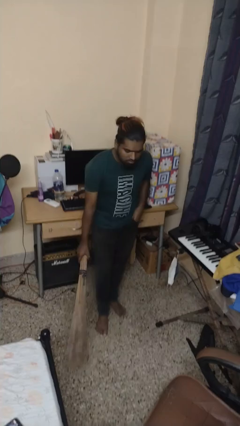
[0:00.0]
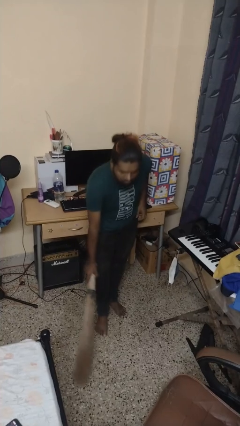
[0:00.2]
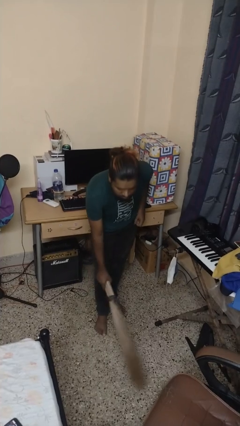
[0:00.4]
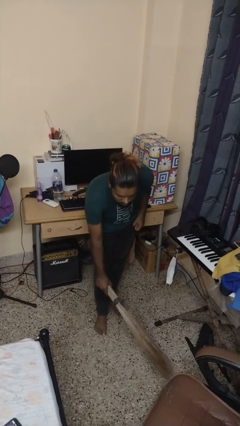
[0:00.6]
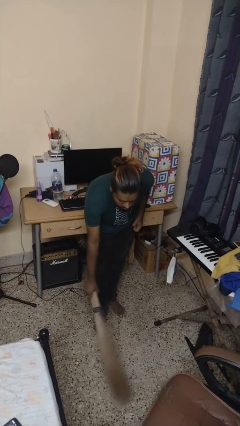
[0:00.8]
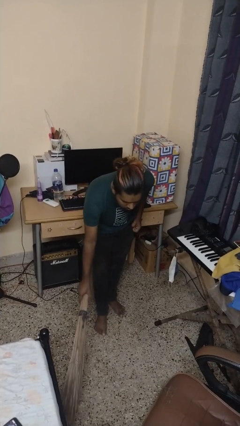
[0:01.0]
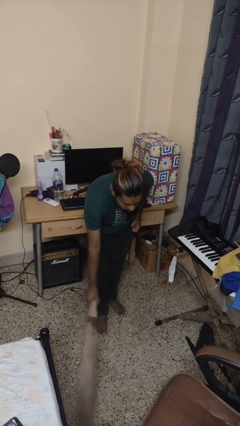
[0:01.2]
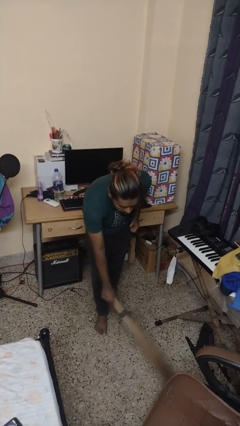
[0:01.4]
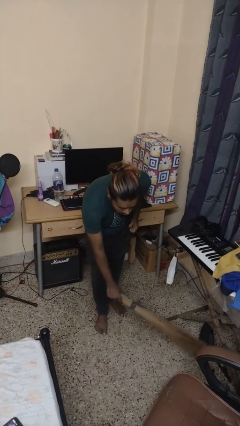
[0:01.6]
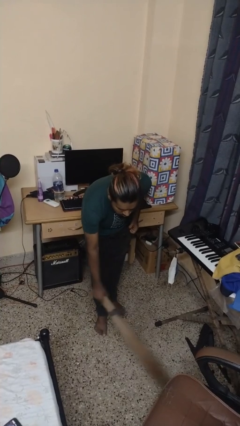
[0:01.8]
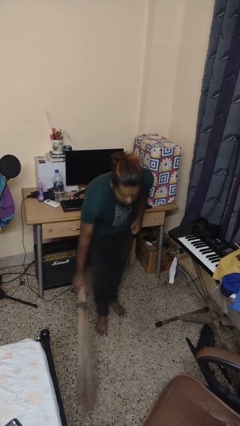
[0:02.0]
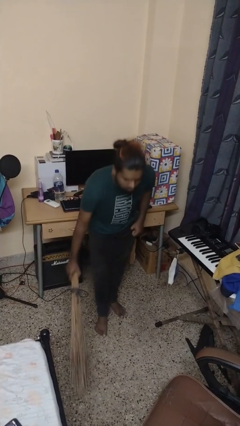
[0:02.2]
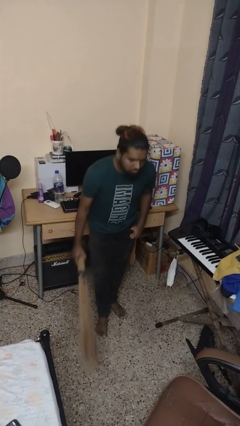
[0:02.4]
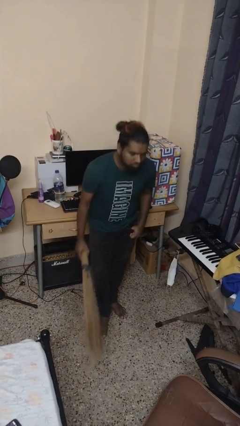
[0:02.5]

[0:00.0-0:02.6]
person sweeps floor

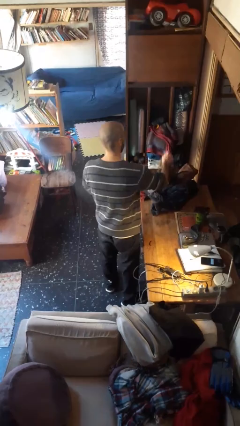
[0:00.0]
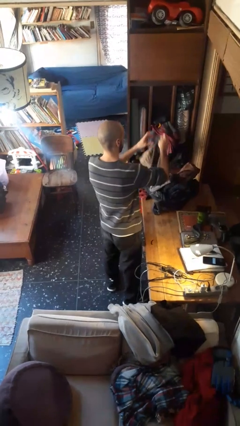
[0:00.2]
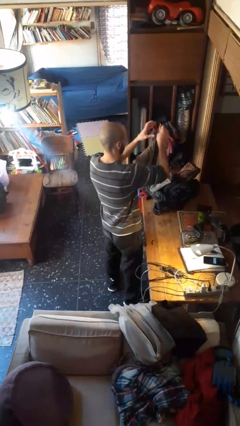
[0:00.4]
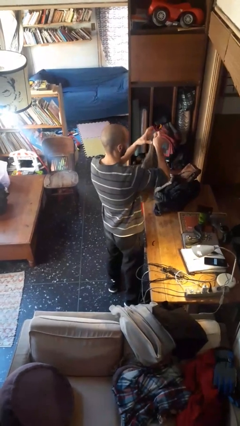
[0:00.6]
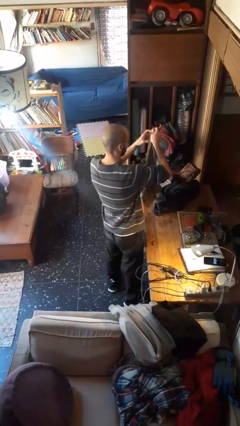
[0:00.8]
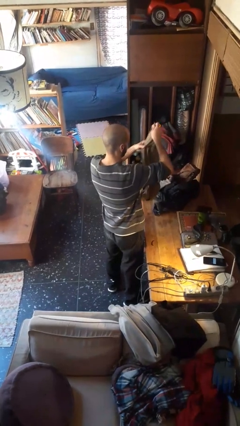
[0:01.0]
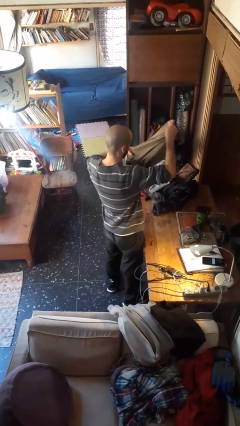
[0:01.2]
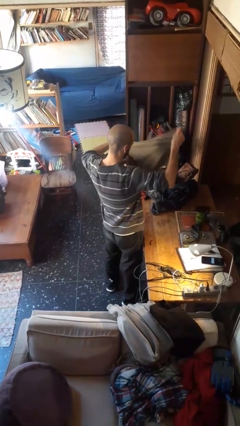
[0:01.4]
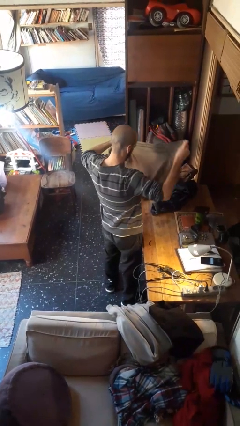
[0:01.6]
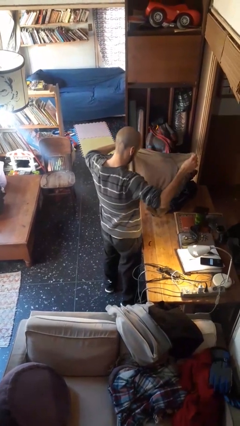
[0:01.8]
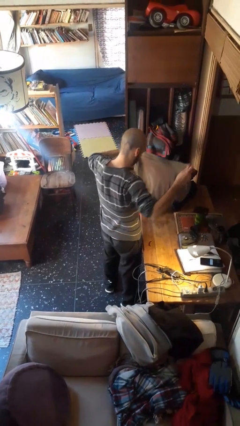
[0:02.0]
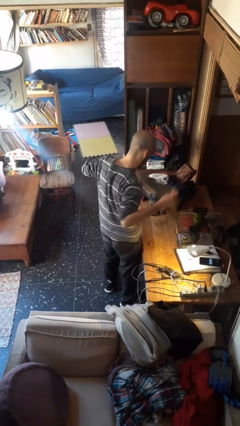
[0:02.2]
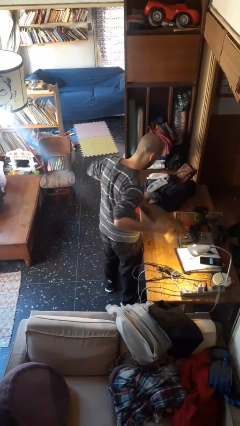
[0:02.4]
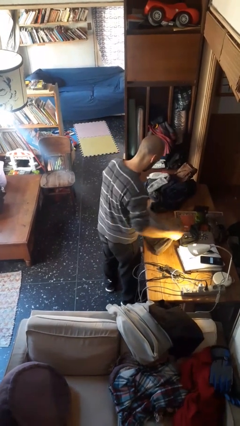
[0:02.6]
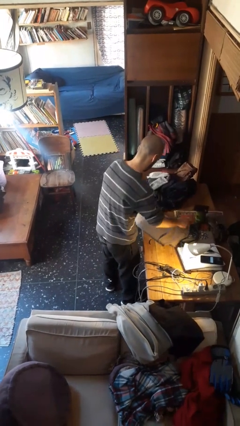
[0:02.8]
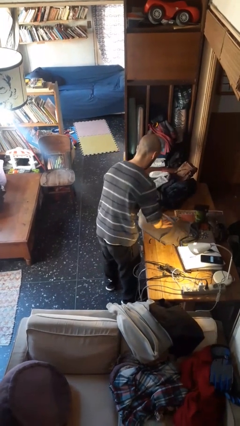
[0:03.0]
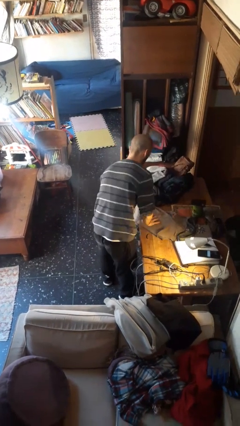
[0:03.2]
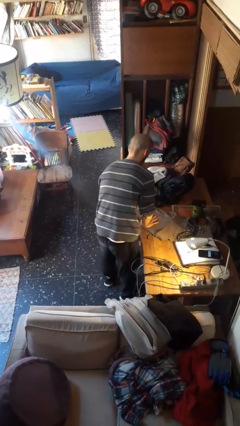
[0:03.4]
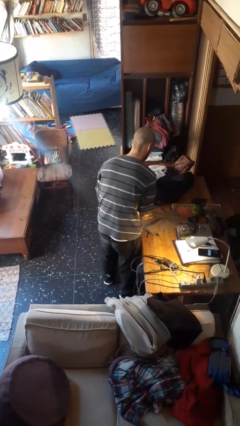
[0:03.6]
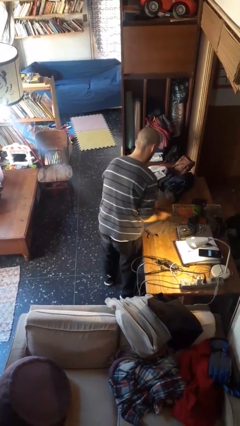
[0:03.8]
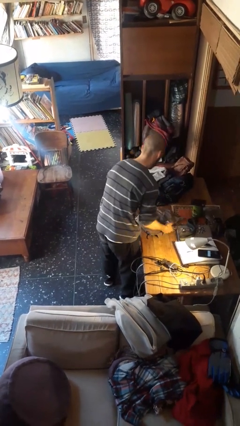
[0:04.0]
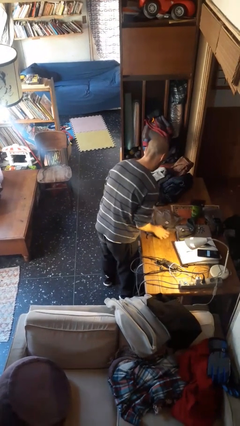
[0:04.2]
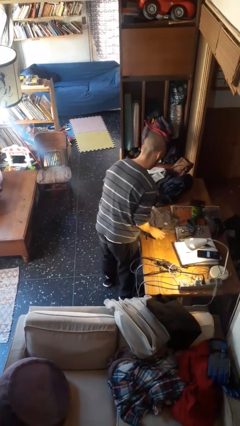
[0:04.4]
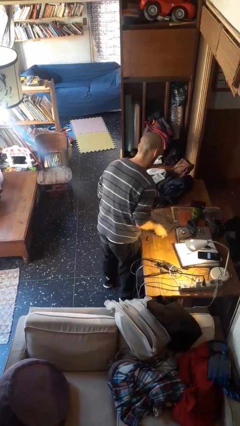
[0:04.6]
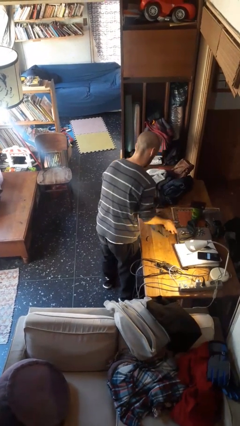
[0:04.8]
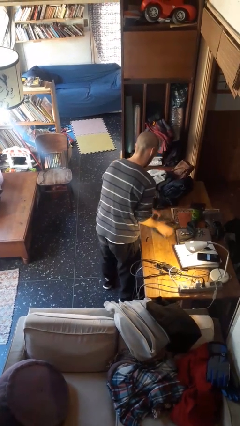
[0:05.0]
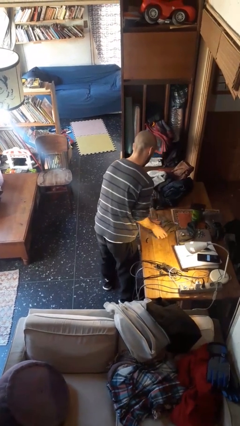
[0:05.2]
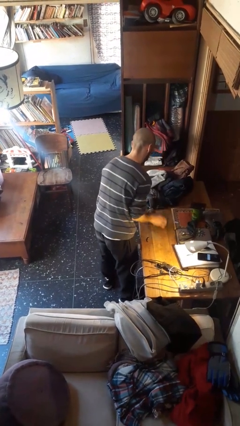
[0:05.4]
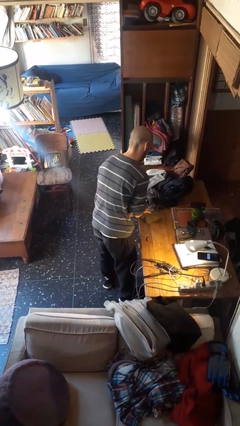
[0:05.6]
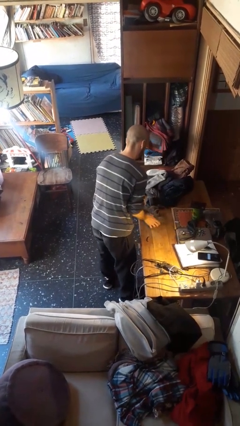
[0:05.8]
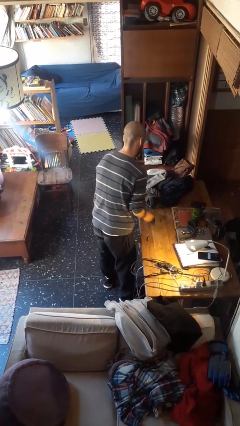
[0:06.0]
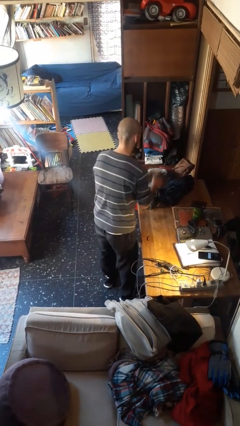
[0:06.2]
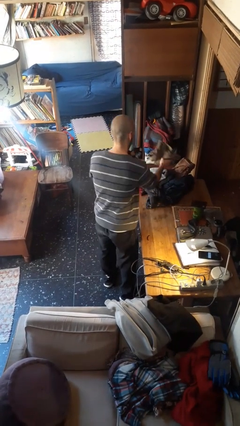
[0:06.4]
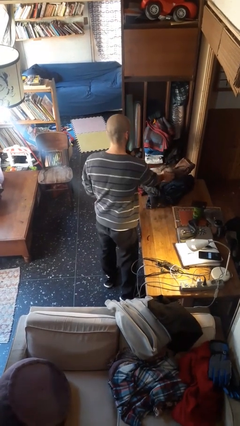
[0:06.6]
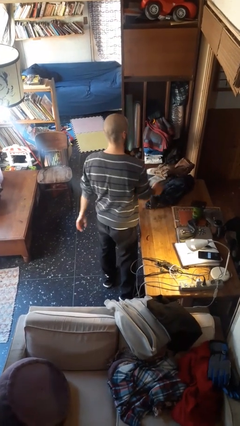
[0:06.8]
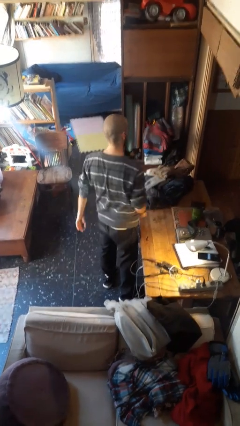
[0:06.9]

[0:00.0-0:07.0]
person folds shirt

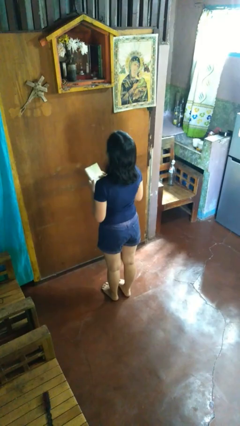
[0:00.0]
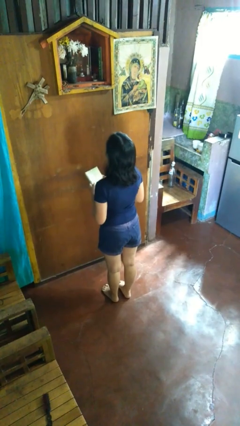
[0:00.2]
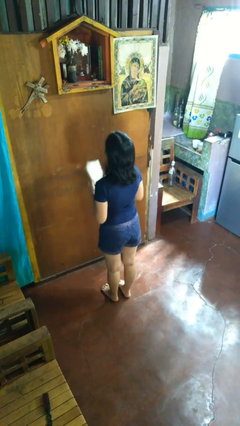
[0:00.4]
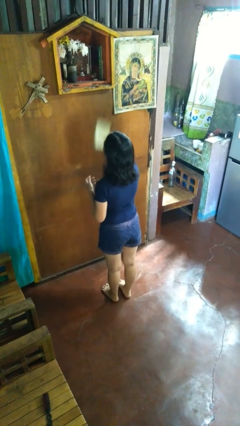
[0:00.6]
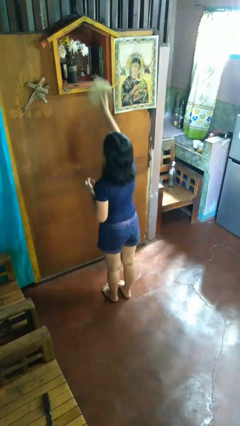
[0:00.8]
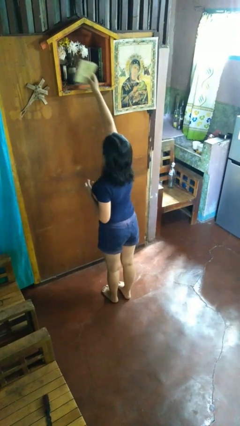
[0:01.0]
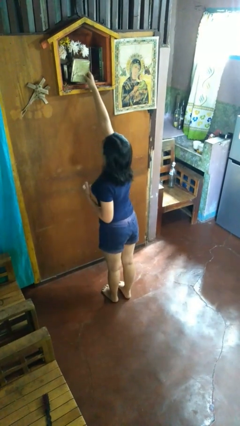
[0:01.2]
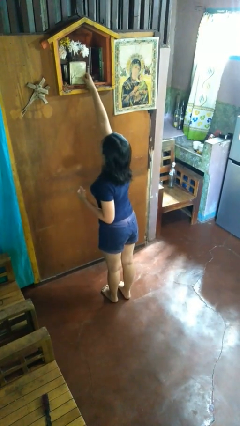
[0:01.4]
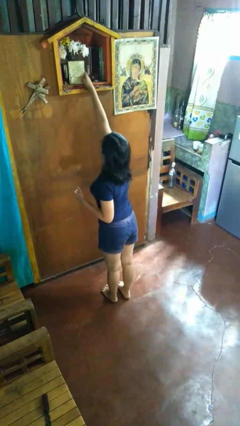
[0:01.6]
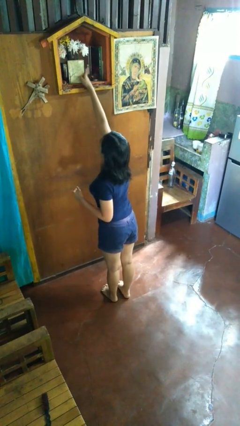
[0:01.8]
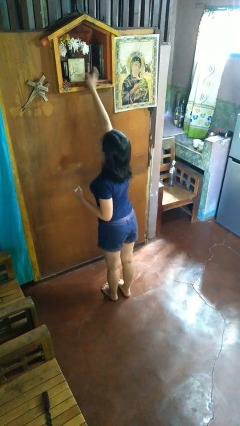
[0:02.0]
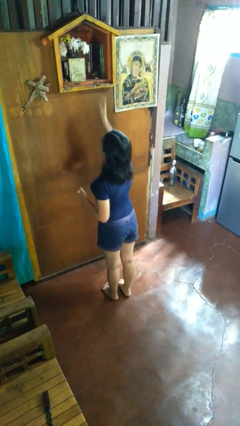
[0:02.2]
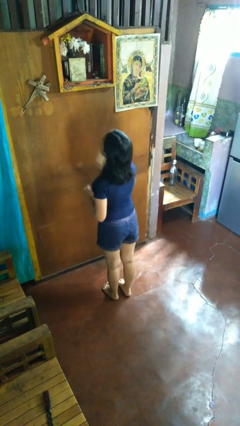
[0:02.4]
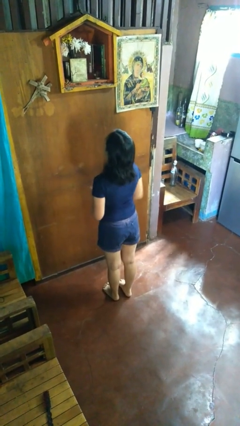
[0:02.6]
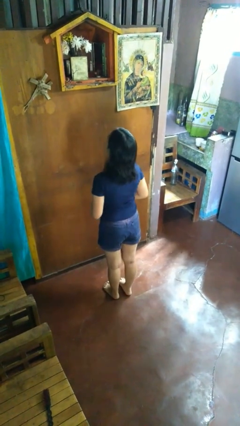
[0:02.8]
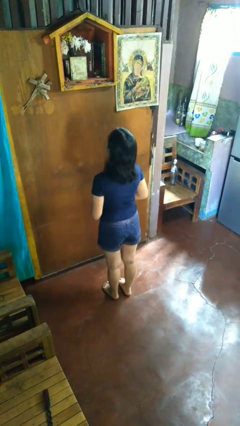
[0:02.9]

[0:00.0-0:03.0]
person puts down object on shelf

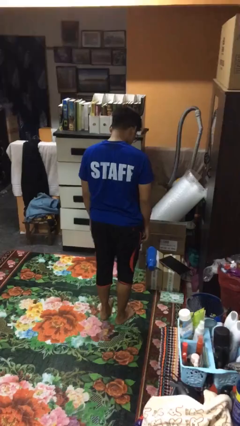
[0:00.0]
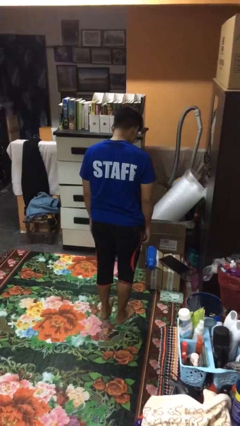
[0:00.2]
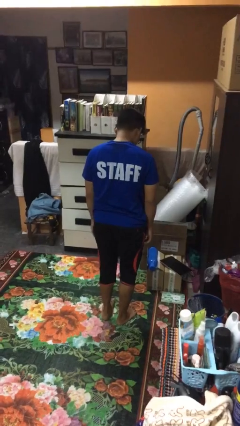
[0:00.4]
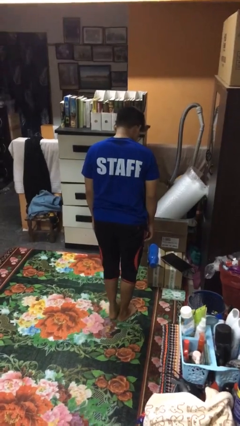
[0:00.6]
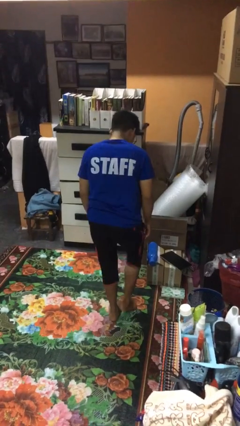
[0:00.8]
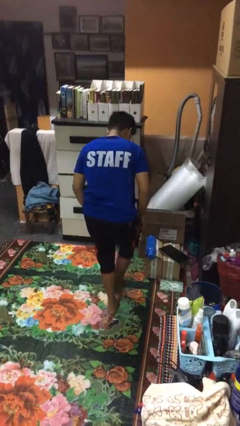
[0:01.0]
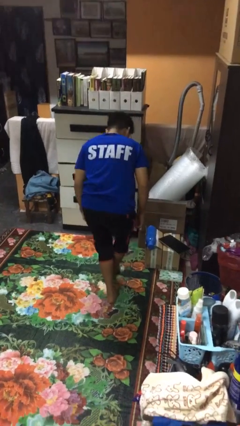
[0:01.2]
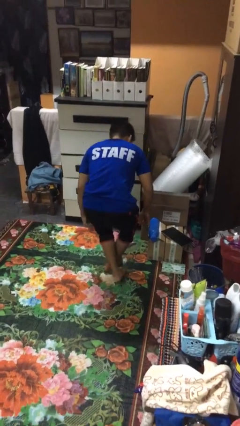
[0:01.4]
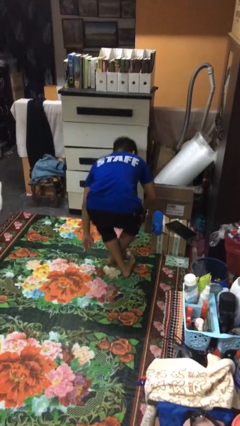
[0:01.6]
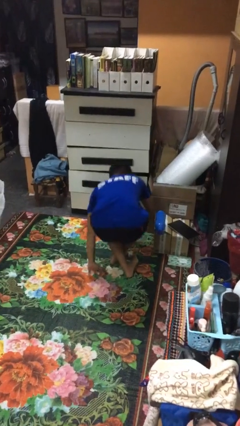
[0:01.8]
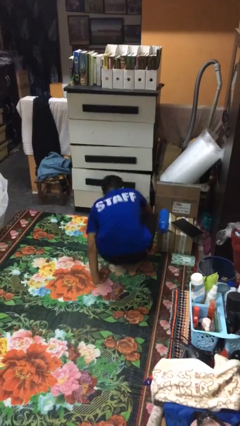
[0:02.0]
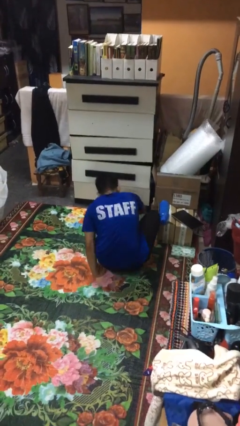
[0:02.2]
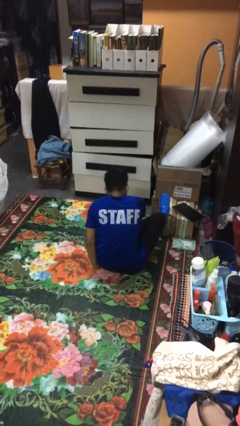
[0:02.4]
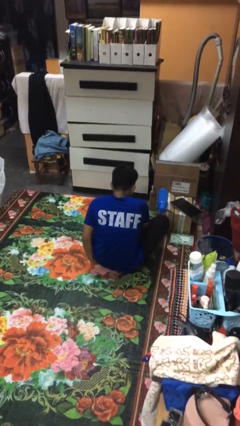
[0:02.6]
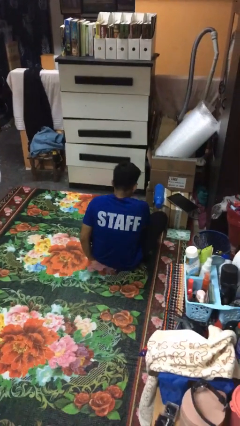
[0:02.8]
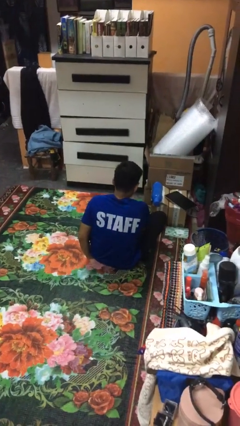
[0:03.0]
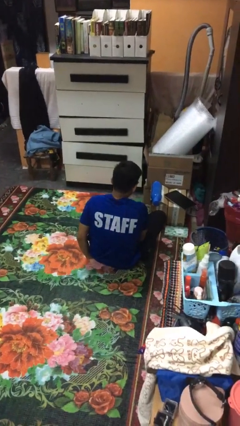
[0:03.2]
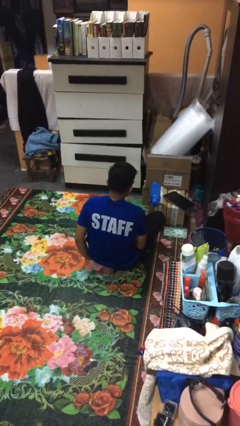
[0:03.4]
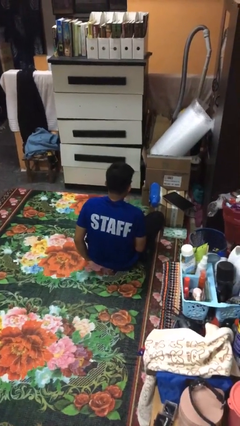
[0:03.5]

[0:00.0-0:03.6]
person sits crisscross

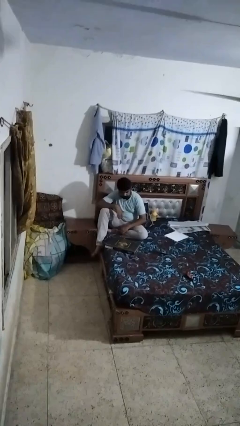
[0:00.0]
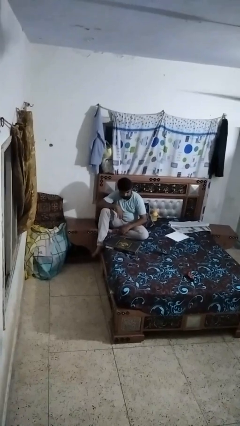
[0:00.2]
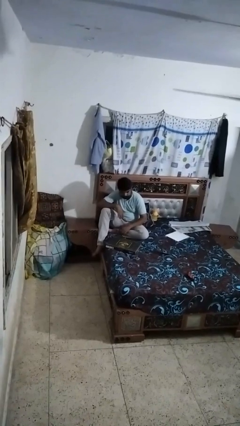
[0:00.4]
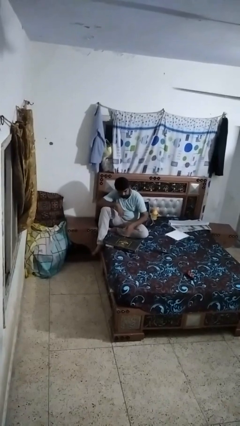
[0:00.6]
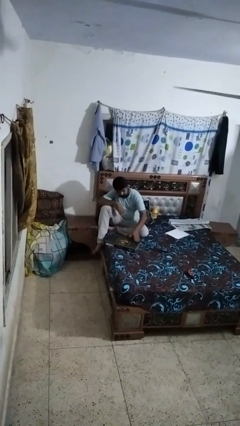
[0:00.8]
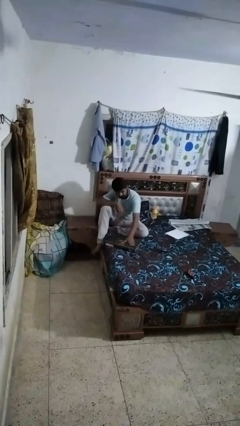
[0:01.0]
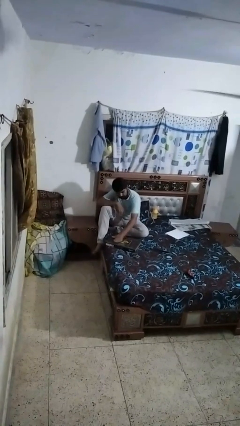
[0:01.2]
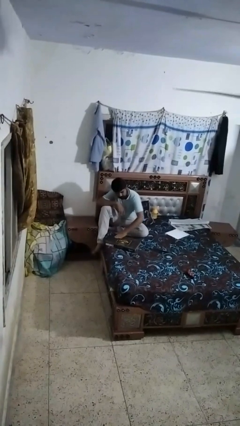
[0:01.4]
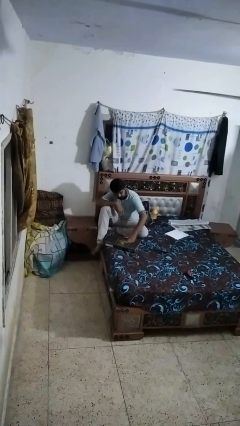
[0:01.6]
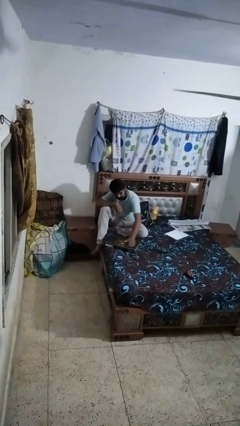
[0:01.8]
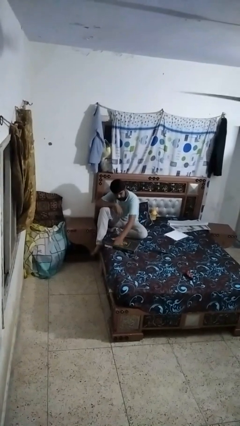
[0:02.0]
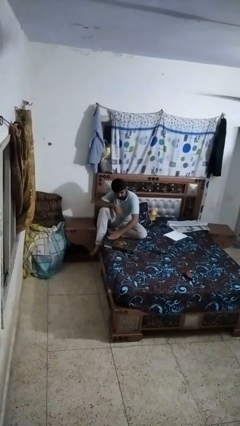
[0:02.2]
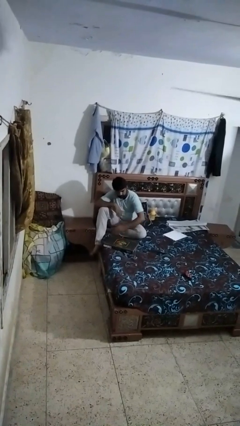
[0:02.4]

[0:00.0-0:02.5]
person waves hand over object
